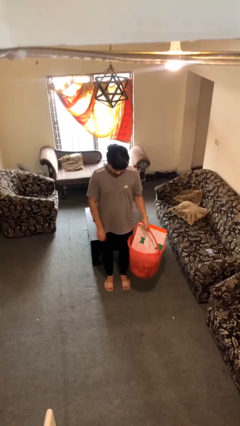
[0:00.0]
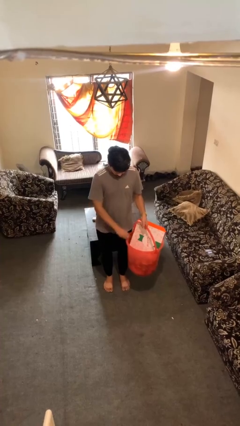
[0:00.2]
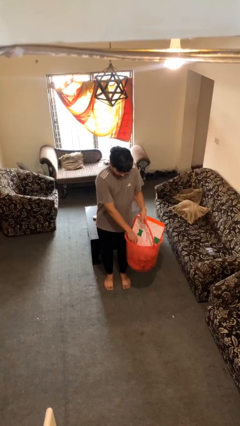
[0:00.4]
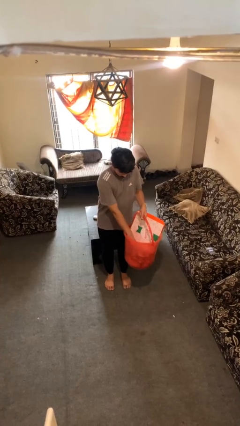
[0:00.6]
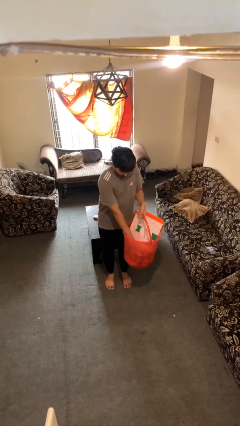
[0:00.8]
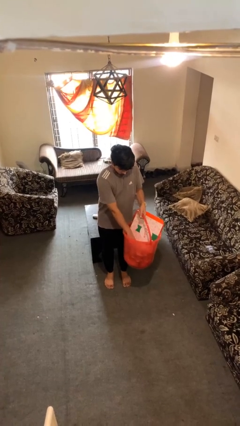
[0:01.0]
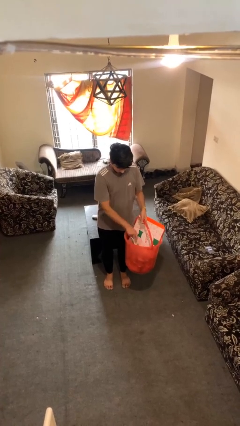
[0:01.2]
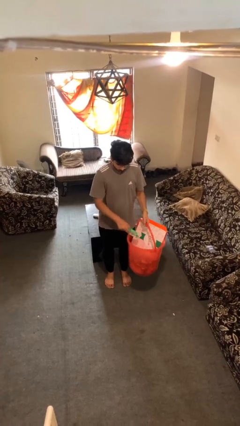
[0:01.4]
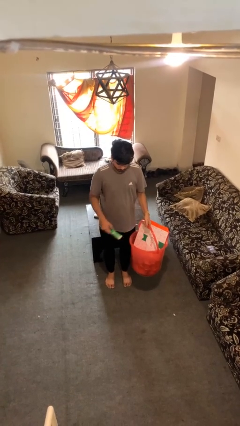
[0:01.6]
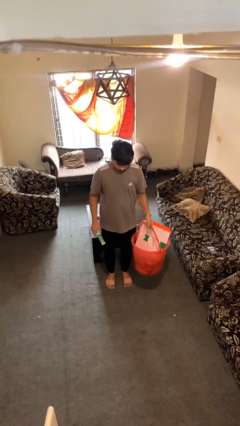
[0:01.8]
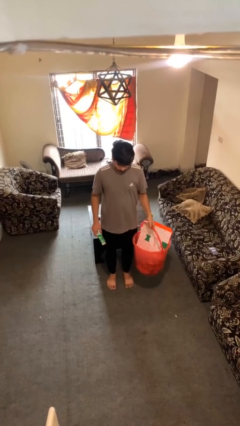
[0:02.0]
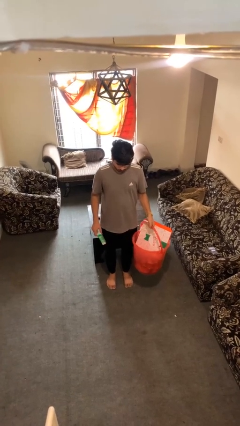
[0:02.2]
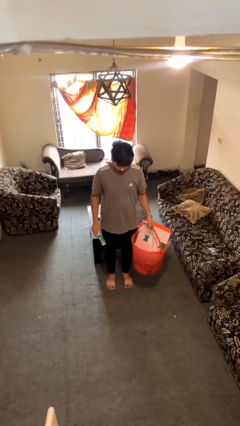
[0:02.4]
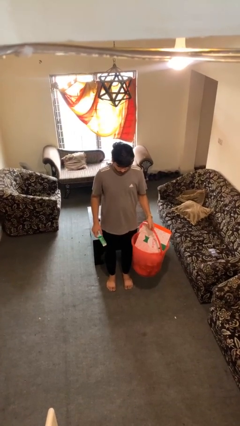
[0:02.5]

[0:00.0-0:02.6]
person takes object from basket

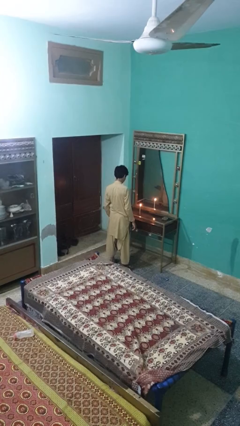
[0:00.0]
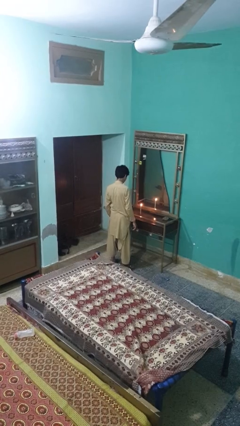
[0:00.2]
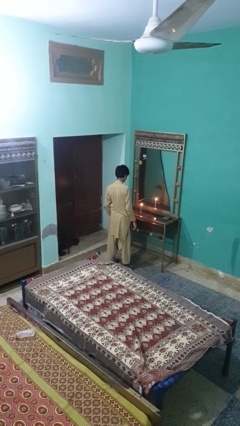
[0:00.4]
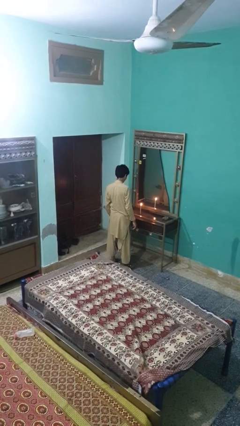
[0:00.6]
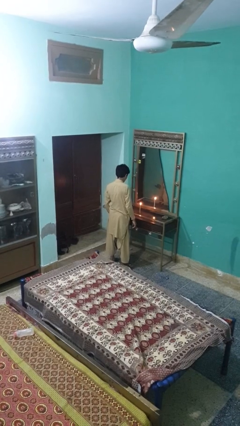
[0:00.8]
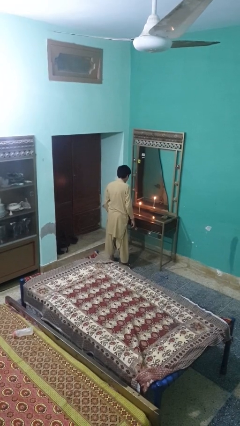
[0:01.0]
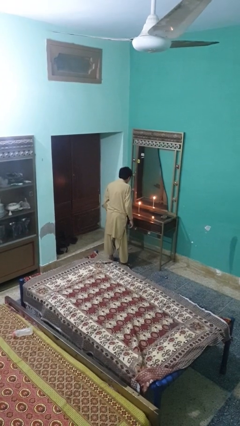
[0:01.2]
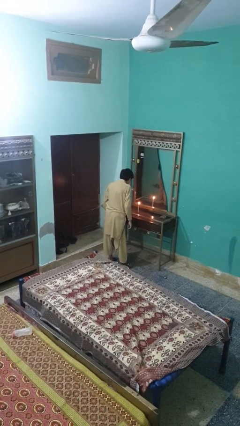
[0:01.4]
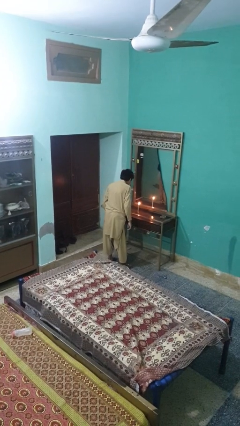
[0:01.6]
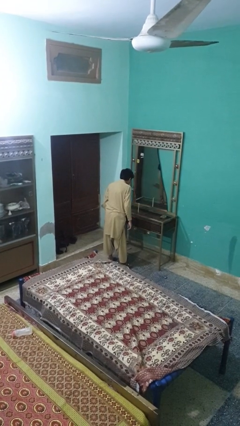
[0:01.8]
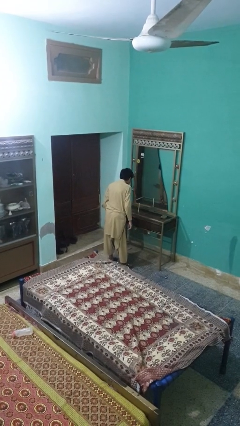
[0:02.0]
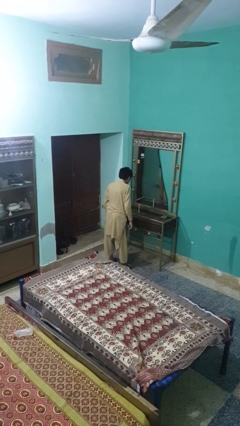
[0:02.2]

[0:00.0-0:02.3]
person extinguishes candle

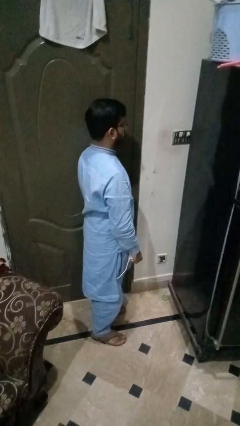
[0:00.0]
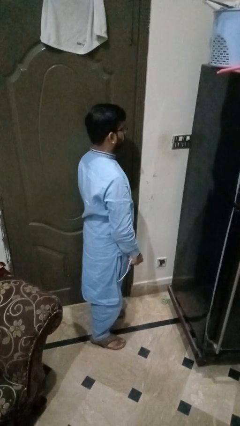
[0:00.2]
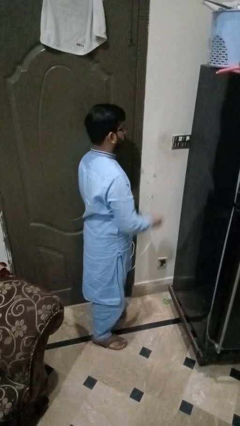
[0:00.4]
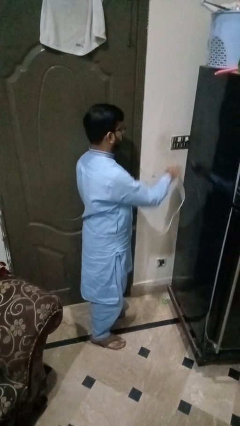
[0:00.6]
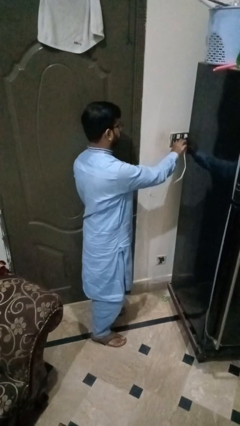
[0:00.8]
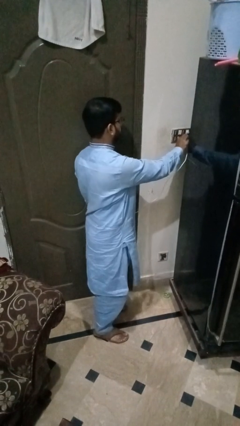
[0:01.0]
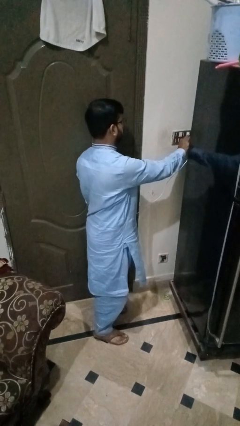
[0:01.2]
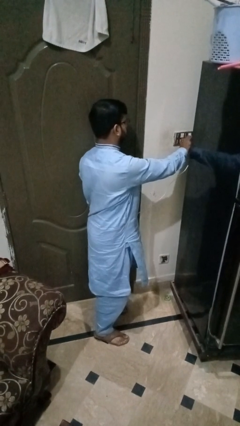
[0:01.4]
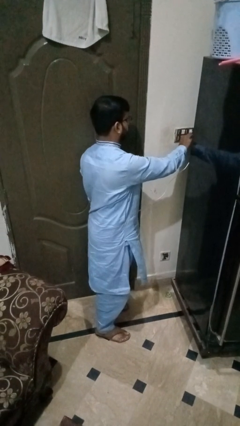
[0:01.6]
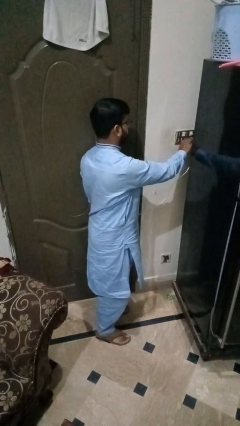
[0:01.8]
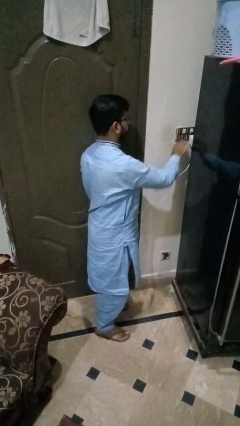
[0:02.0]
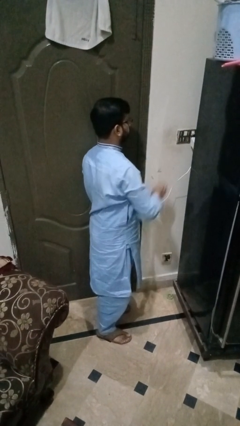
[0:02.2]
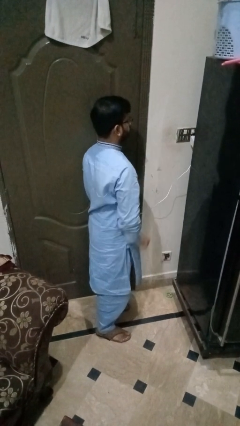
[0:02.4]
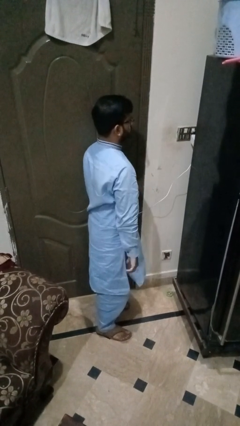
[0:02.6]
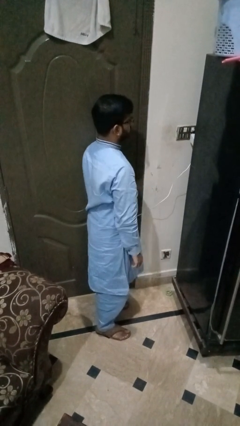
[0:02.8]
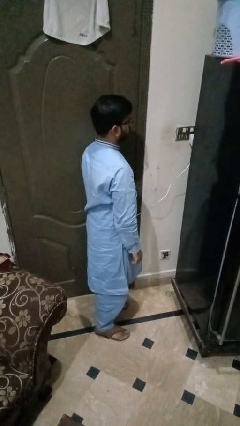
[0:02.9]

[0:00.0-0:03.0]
person plugs into electrical socket

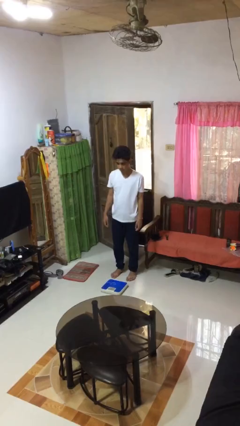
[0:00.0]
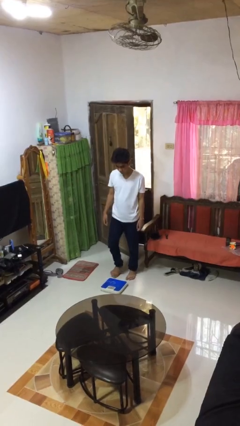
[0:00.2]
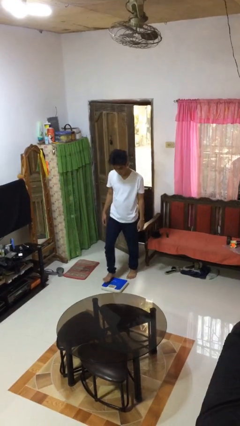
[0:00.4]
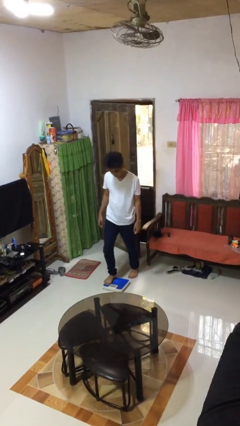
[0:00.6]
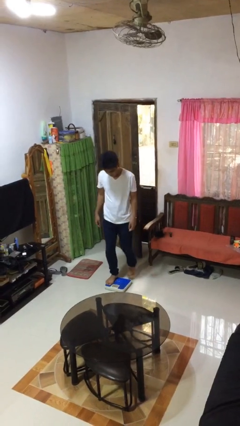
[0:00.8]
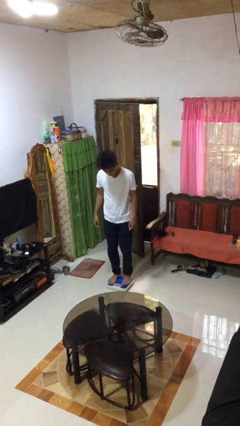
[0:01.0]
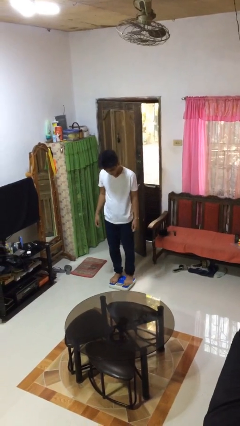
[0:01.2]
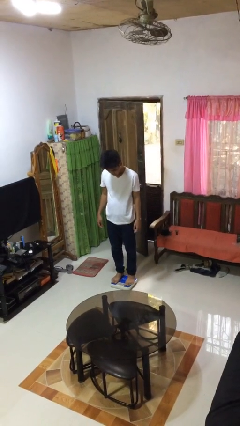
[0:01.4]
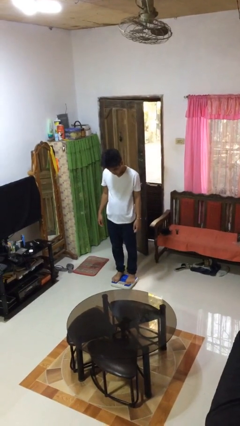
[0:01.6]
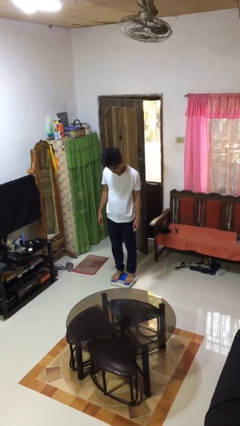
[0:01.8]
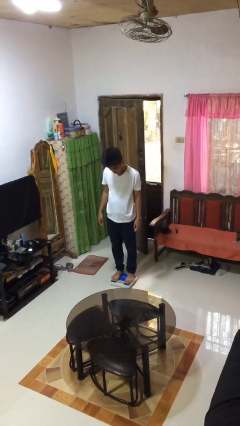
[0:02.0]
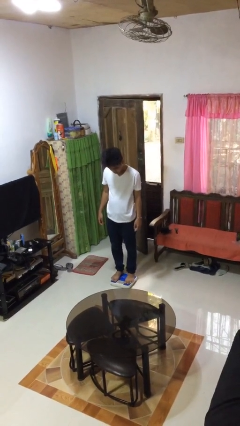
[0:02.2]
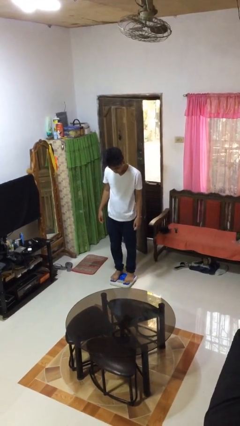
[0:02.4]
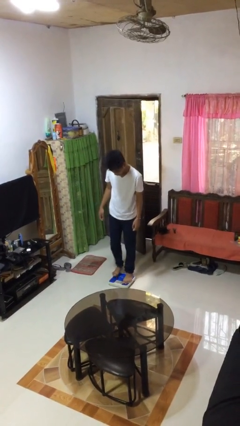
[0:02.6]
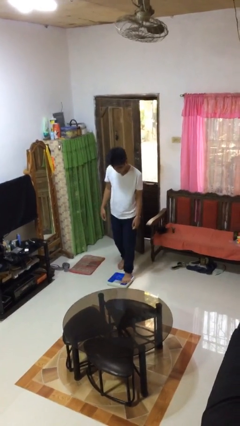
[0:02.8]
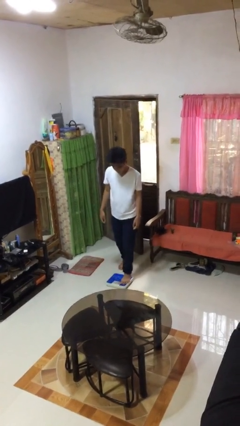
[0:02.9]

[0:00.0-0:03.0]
person uses bodyweight scale

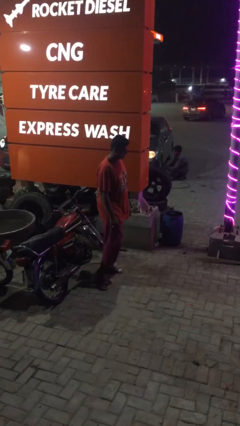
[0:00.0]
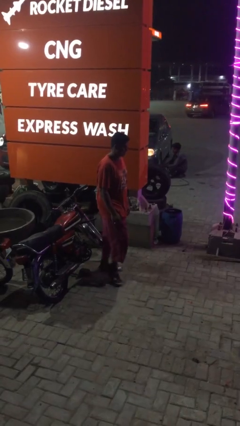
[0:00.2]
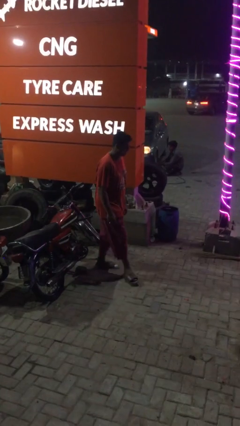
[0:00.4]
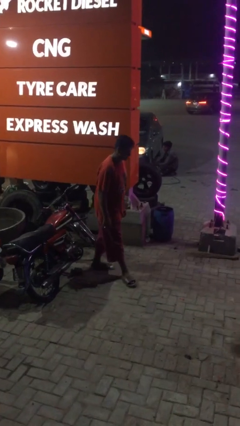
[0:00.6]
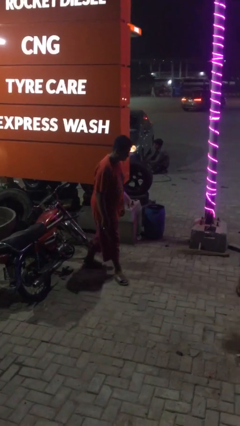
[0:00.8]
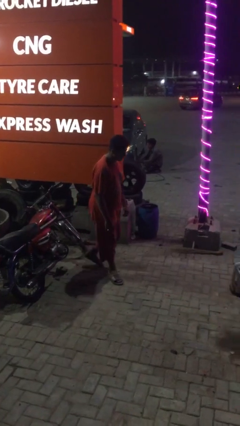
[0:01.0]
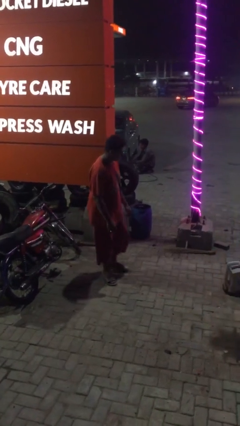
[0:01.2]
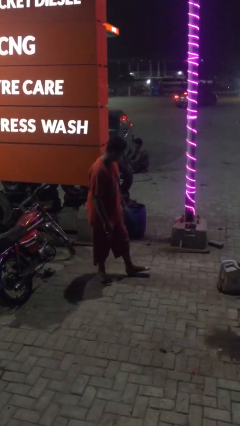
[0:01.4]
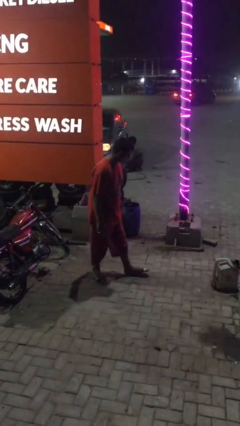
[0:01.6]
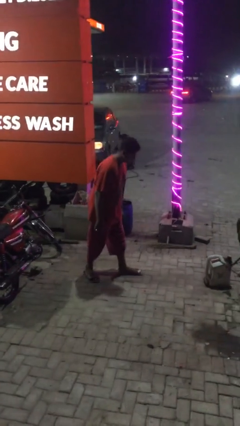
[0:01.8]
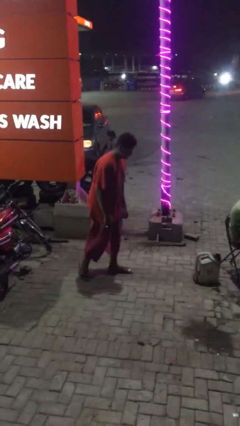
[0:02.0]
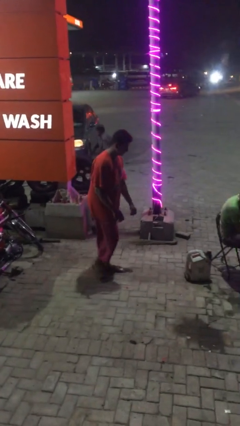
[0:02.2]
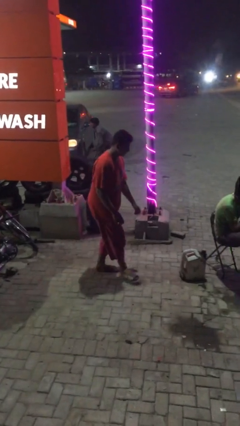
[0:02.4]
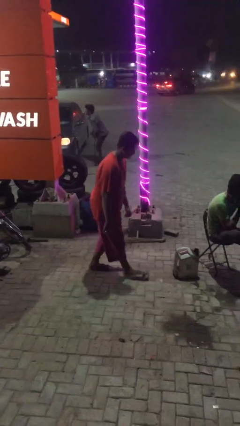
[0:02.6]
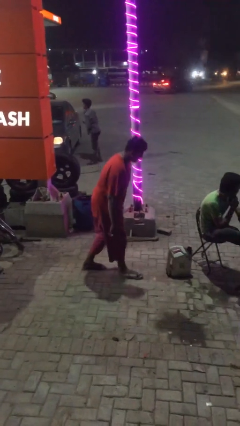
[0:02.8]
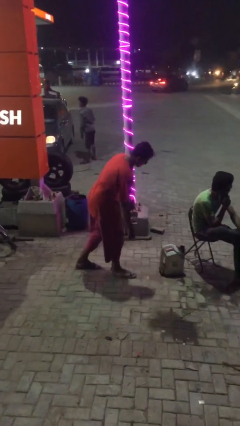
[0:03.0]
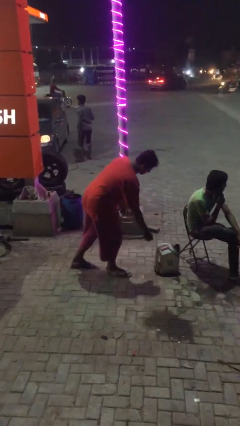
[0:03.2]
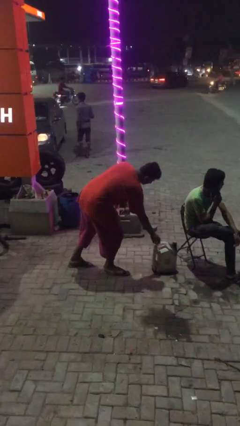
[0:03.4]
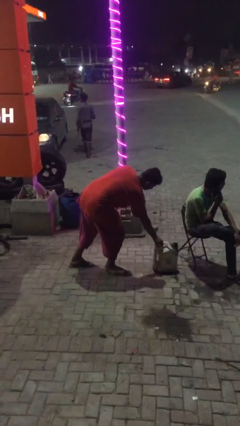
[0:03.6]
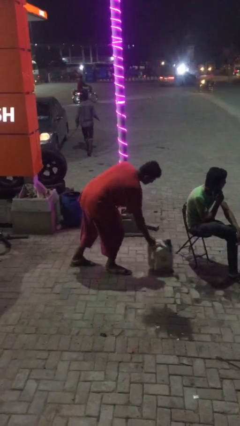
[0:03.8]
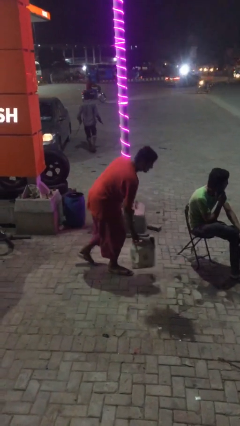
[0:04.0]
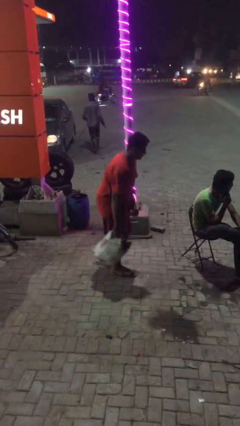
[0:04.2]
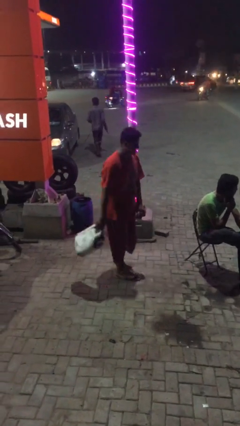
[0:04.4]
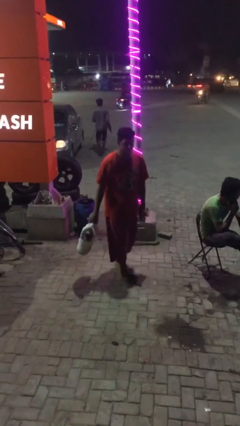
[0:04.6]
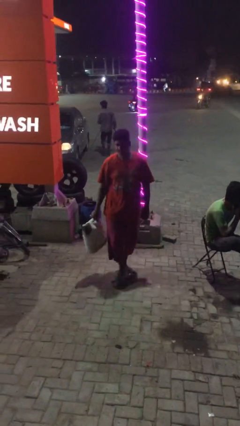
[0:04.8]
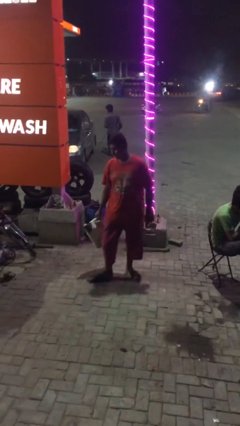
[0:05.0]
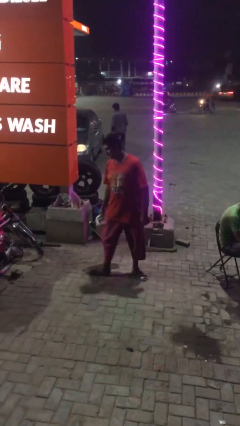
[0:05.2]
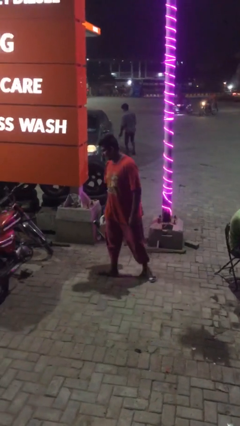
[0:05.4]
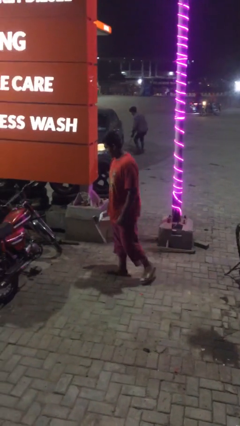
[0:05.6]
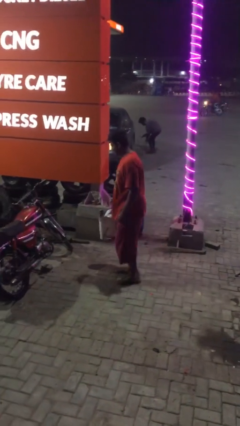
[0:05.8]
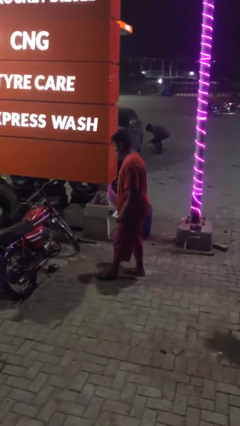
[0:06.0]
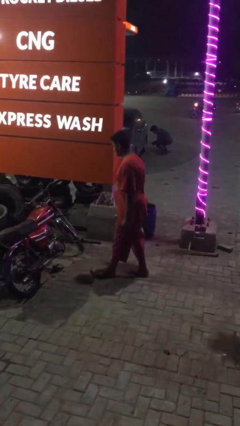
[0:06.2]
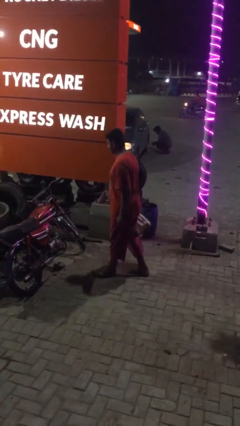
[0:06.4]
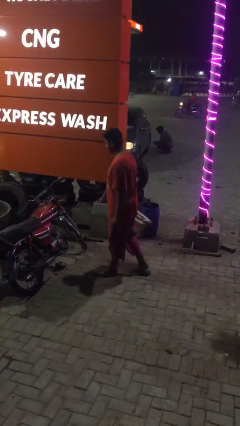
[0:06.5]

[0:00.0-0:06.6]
person steals object from person
